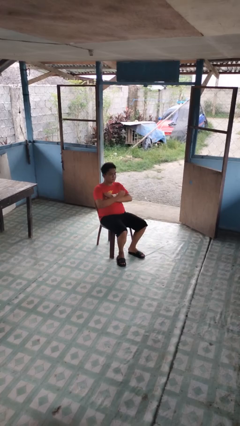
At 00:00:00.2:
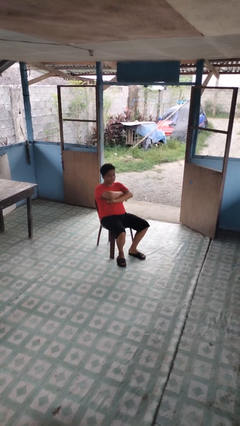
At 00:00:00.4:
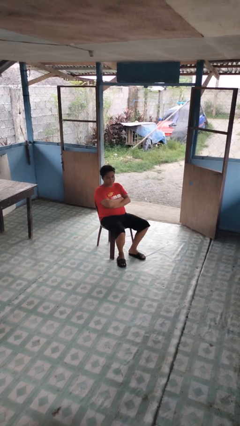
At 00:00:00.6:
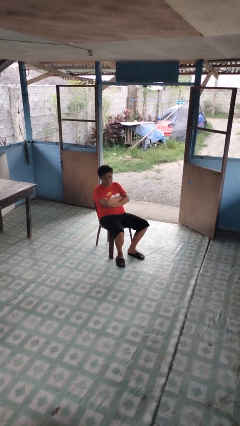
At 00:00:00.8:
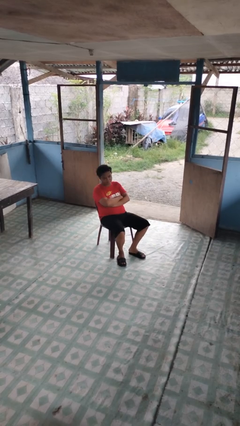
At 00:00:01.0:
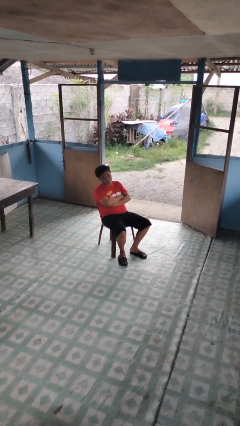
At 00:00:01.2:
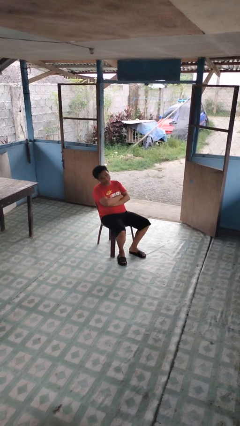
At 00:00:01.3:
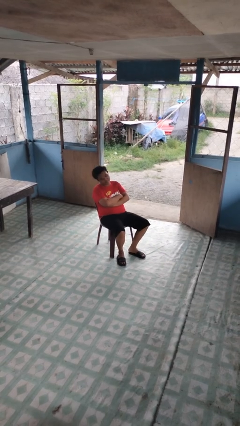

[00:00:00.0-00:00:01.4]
person crosses arms

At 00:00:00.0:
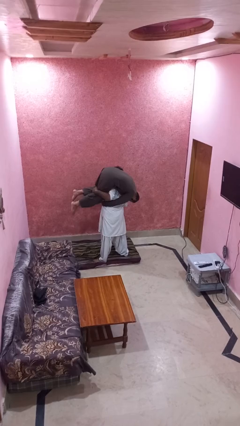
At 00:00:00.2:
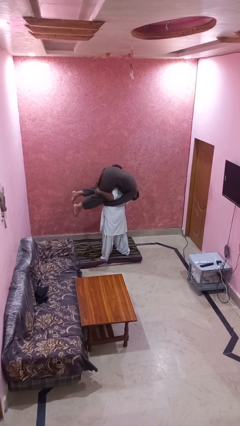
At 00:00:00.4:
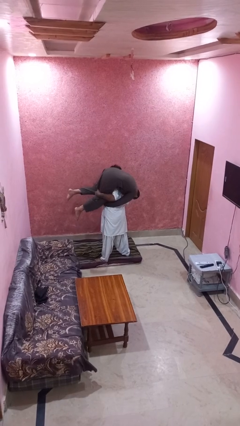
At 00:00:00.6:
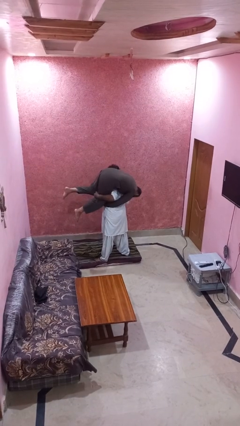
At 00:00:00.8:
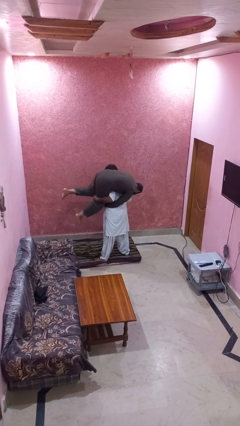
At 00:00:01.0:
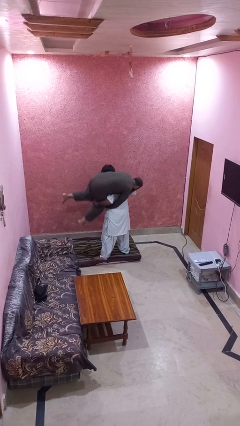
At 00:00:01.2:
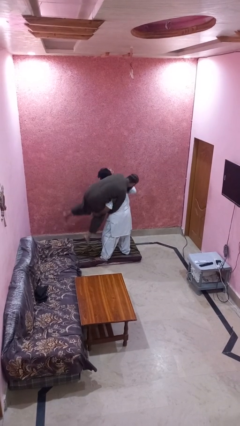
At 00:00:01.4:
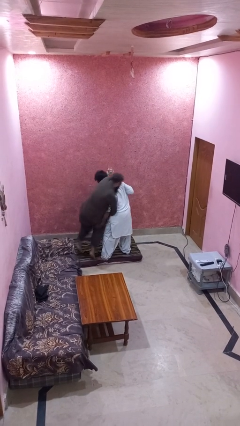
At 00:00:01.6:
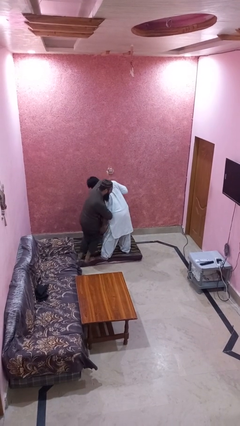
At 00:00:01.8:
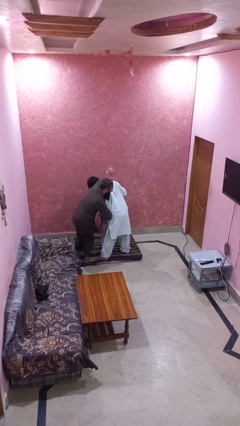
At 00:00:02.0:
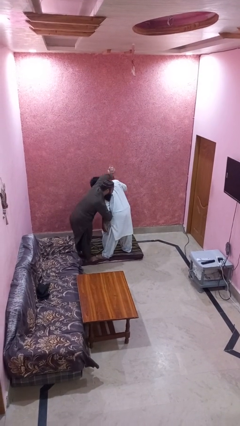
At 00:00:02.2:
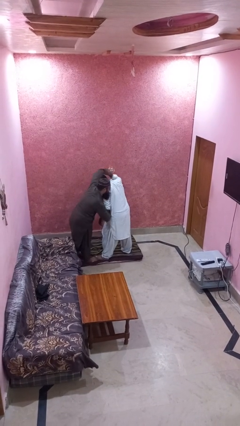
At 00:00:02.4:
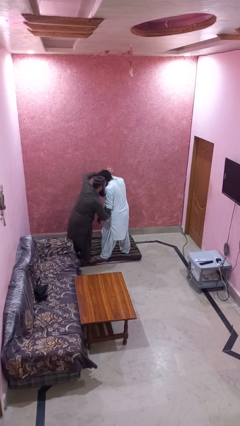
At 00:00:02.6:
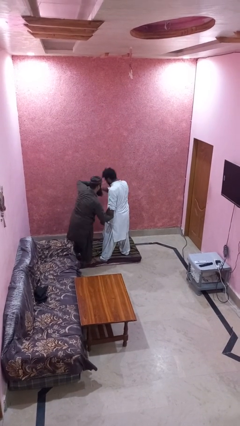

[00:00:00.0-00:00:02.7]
person puts down person

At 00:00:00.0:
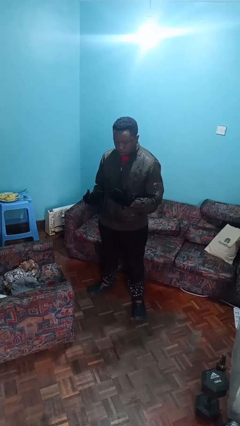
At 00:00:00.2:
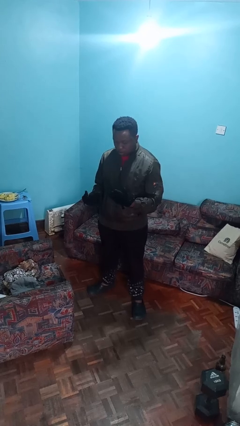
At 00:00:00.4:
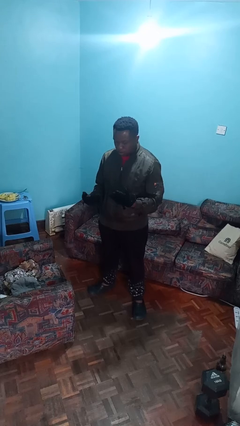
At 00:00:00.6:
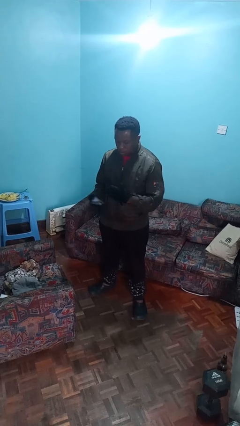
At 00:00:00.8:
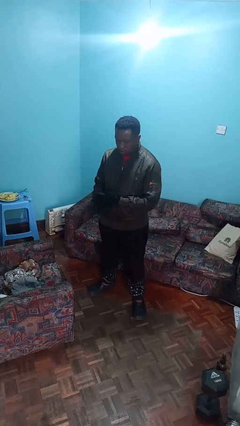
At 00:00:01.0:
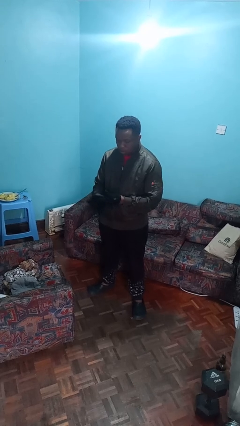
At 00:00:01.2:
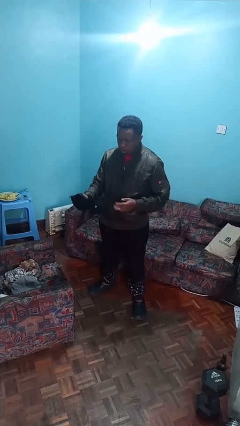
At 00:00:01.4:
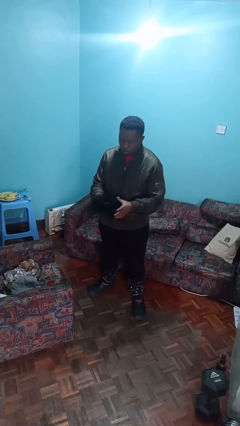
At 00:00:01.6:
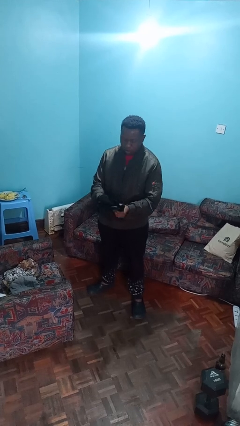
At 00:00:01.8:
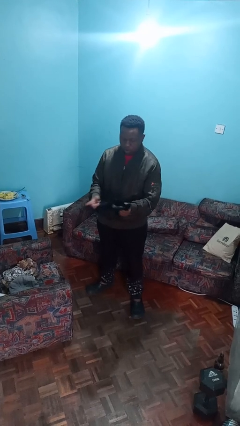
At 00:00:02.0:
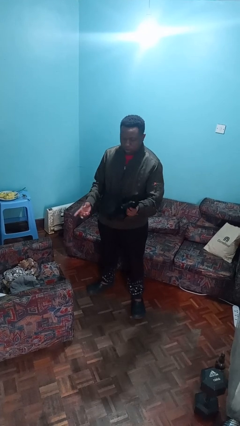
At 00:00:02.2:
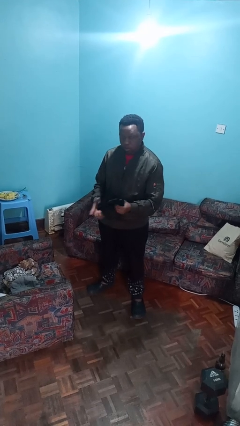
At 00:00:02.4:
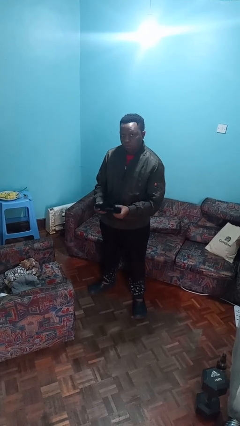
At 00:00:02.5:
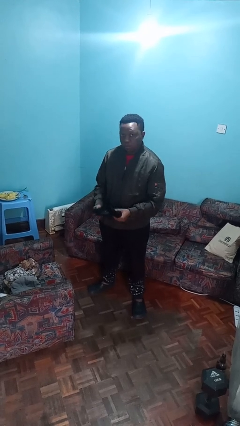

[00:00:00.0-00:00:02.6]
person takes off gloves

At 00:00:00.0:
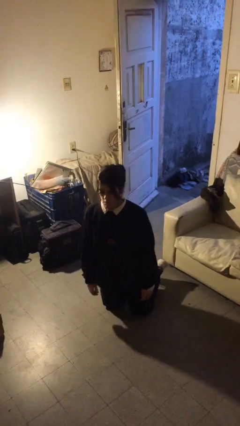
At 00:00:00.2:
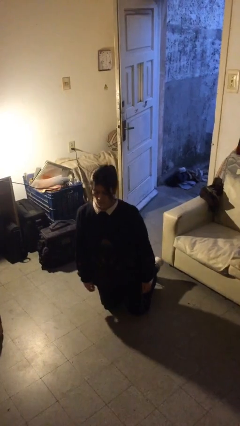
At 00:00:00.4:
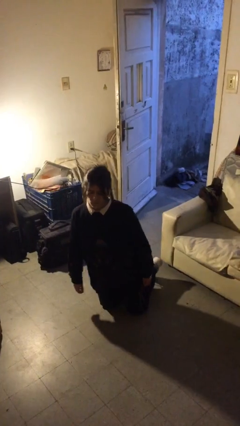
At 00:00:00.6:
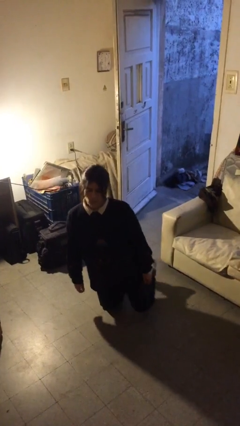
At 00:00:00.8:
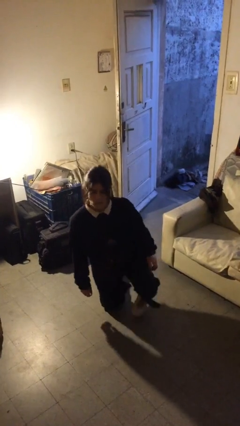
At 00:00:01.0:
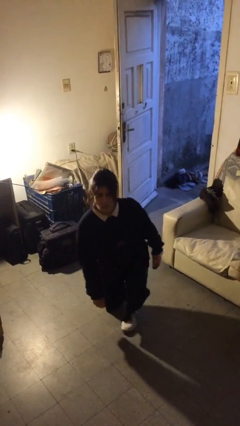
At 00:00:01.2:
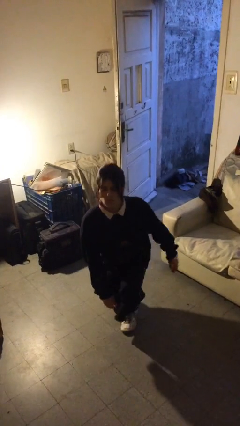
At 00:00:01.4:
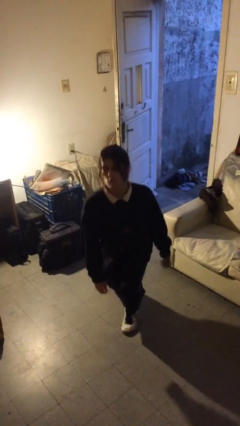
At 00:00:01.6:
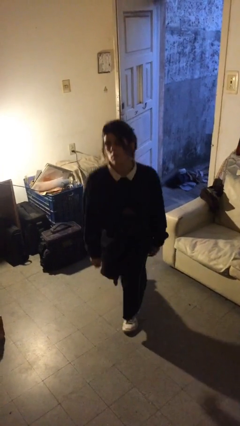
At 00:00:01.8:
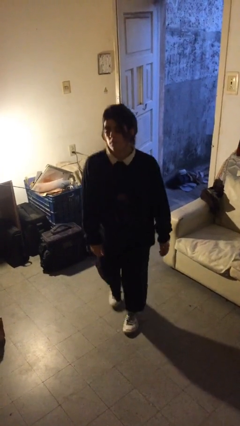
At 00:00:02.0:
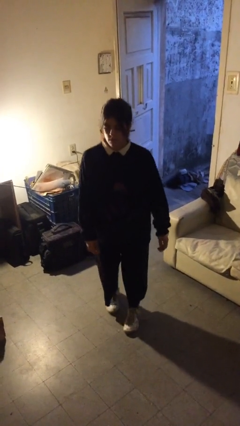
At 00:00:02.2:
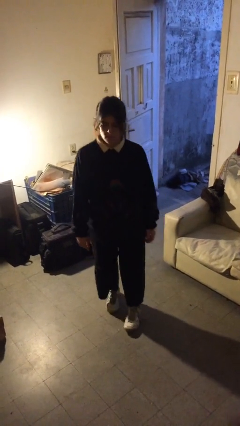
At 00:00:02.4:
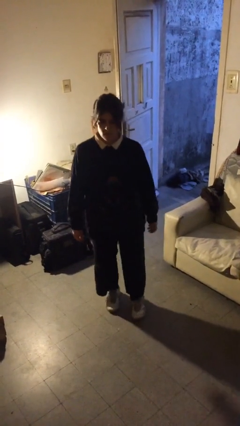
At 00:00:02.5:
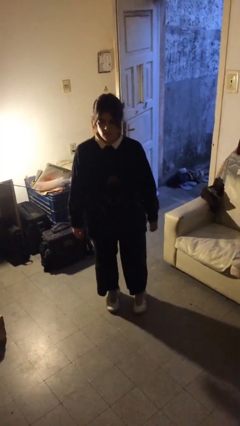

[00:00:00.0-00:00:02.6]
person stands up from floor

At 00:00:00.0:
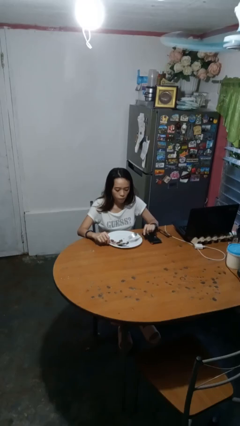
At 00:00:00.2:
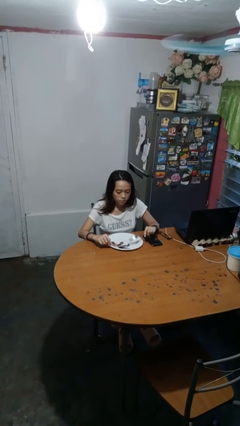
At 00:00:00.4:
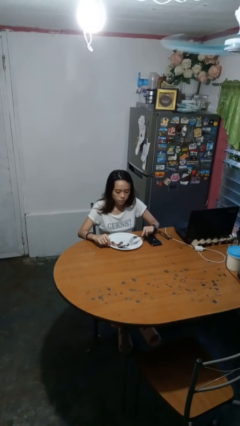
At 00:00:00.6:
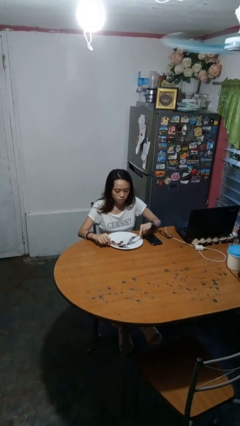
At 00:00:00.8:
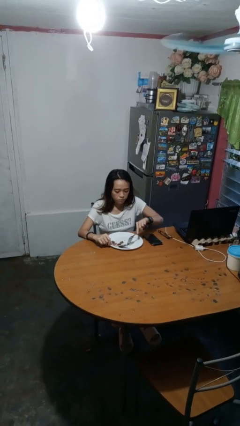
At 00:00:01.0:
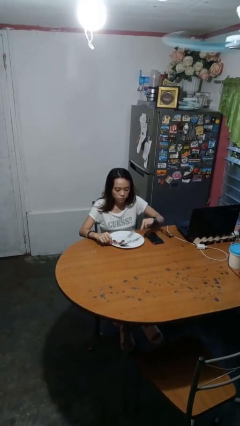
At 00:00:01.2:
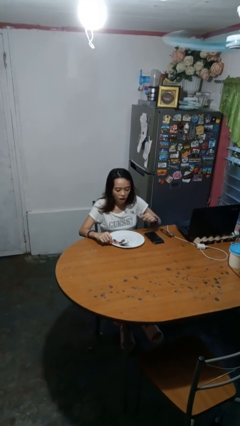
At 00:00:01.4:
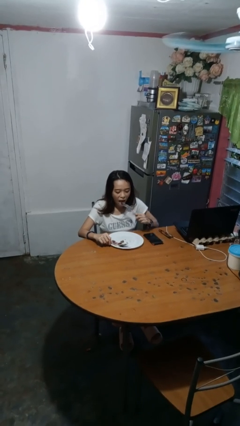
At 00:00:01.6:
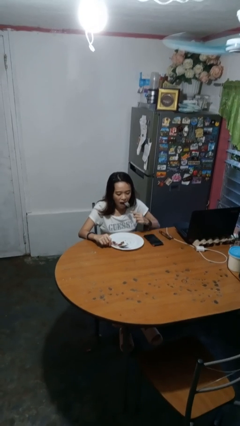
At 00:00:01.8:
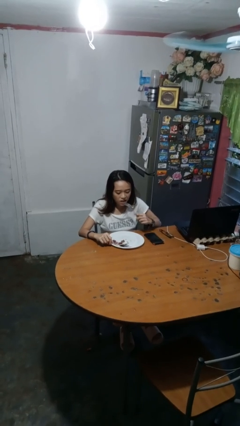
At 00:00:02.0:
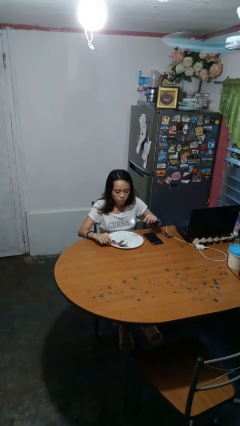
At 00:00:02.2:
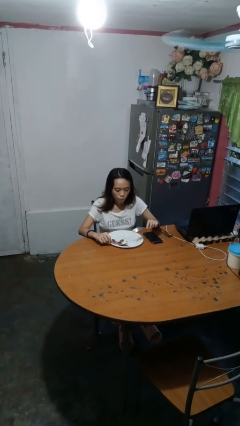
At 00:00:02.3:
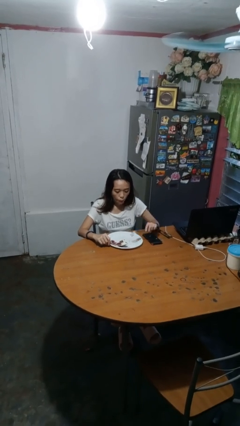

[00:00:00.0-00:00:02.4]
person eats with utensil

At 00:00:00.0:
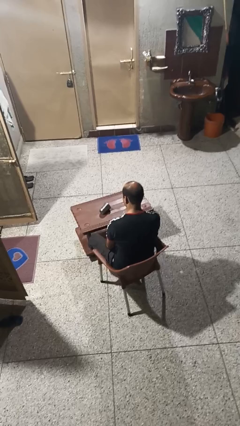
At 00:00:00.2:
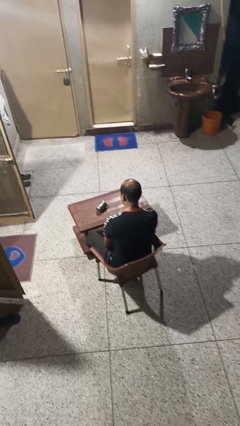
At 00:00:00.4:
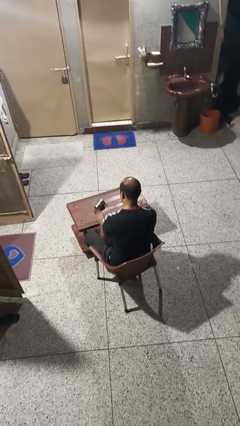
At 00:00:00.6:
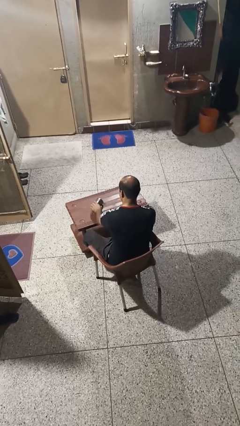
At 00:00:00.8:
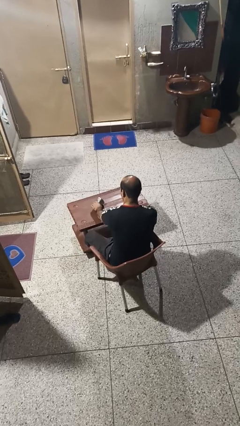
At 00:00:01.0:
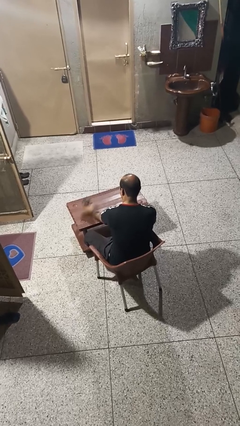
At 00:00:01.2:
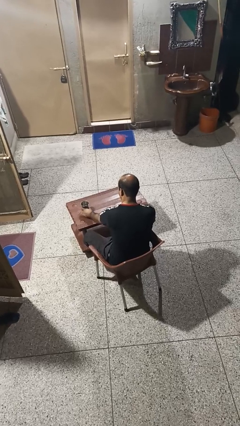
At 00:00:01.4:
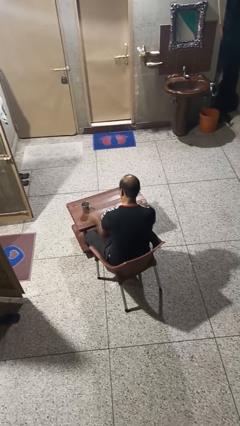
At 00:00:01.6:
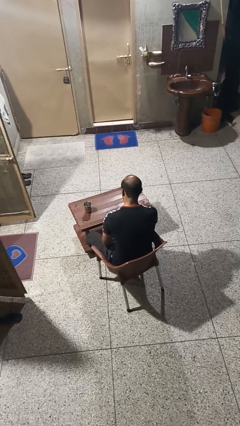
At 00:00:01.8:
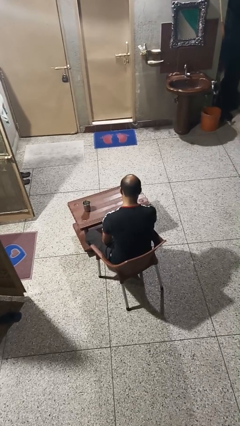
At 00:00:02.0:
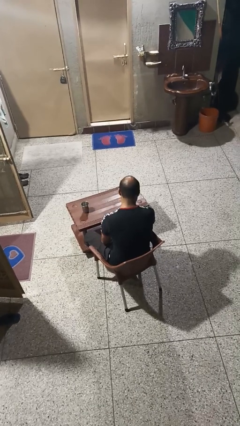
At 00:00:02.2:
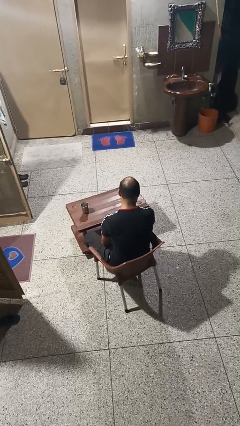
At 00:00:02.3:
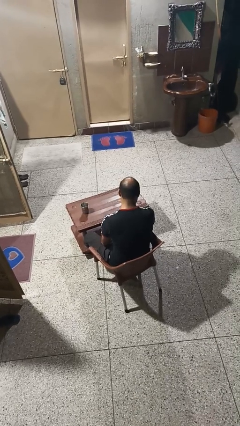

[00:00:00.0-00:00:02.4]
person sets upright glass

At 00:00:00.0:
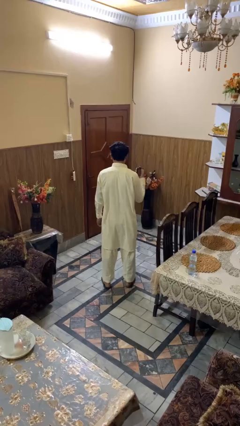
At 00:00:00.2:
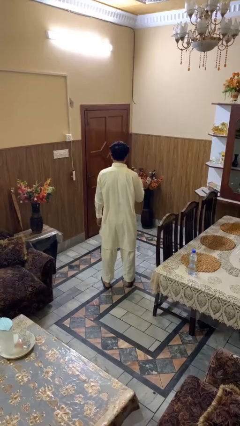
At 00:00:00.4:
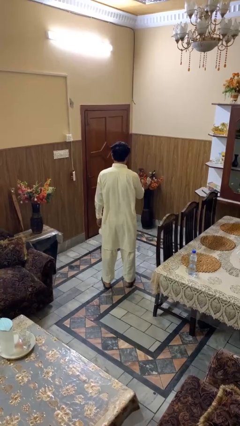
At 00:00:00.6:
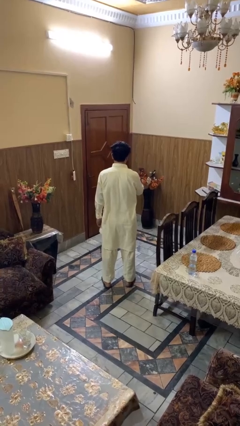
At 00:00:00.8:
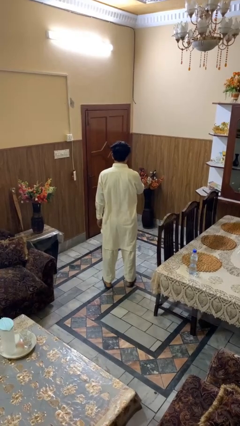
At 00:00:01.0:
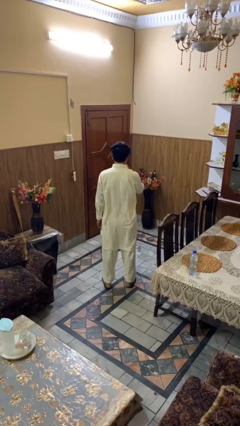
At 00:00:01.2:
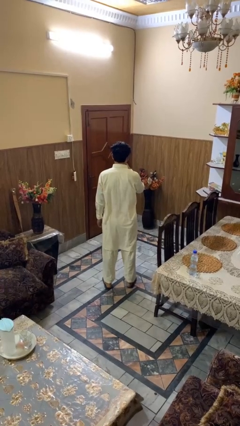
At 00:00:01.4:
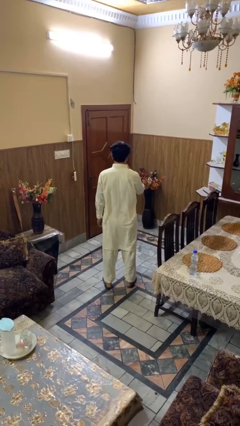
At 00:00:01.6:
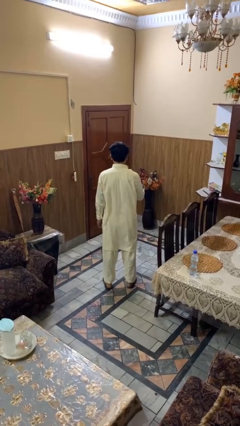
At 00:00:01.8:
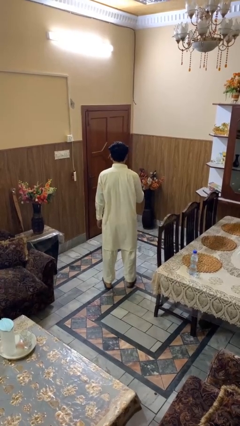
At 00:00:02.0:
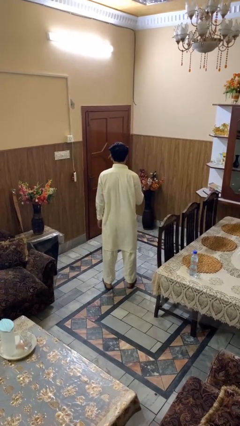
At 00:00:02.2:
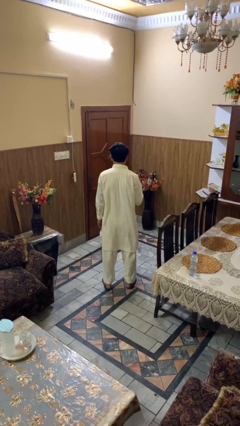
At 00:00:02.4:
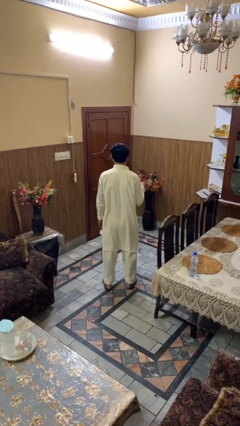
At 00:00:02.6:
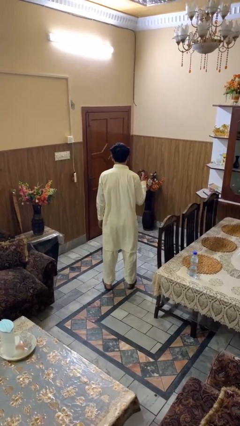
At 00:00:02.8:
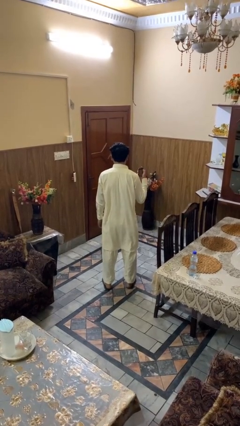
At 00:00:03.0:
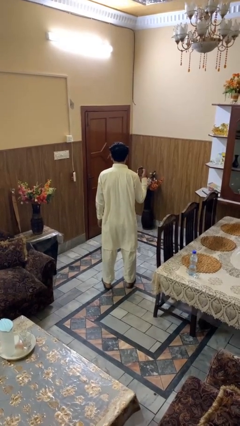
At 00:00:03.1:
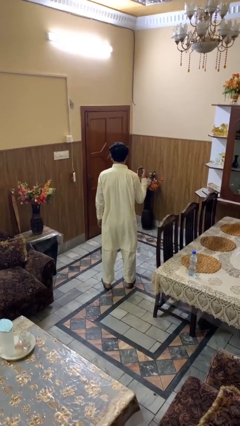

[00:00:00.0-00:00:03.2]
person vapes
